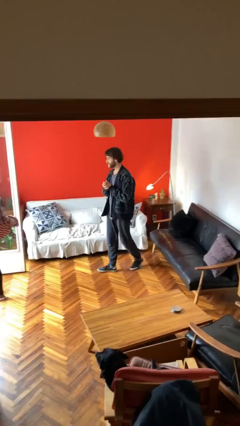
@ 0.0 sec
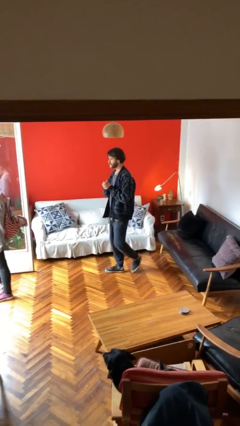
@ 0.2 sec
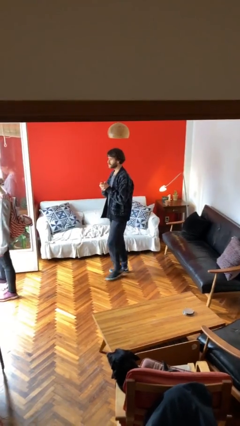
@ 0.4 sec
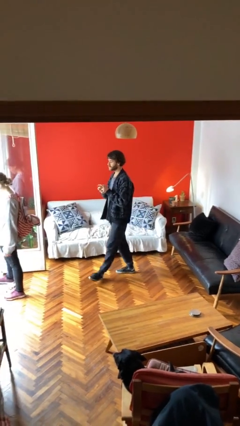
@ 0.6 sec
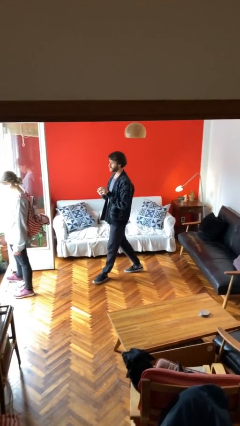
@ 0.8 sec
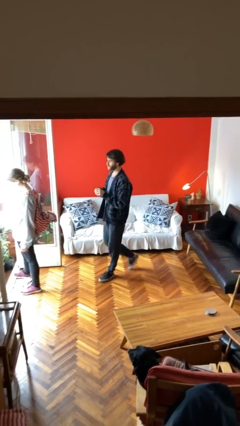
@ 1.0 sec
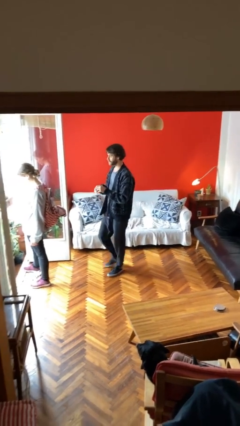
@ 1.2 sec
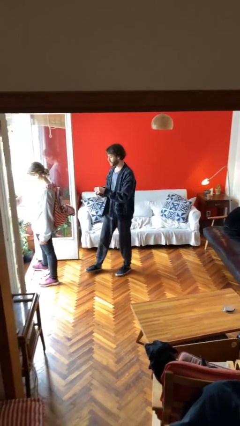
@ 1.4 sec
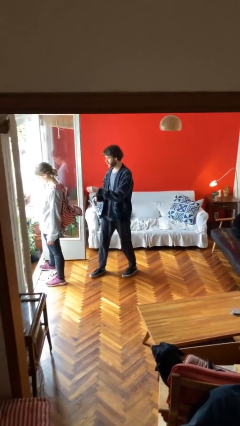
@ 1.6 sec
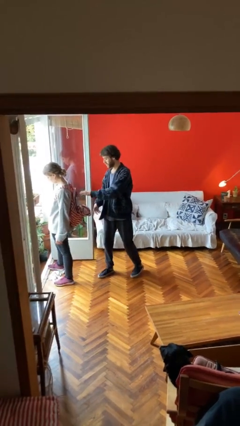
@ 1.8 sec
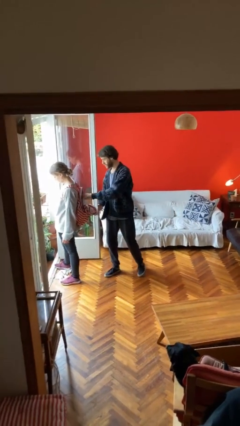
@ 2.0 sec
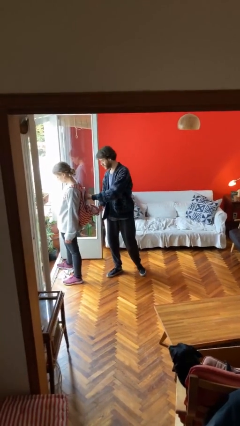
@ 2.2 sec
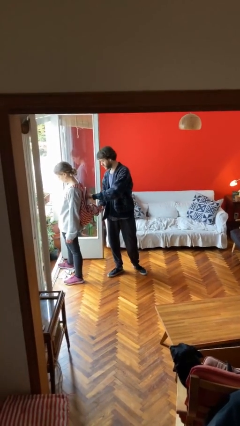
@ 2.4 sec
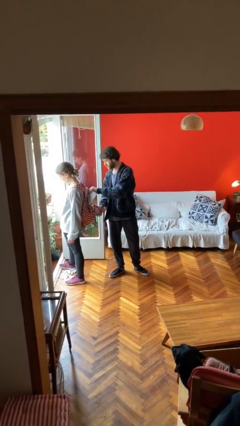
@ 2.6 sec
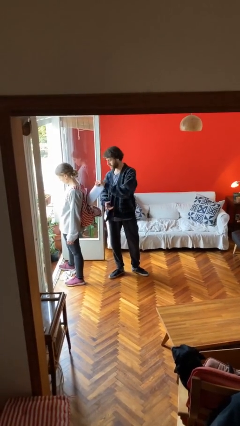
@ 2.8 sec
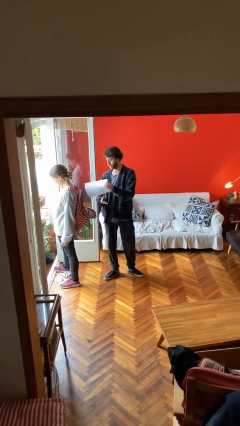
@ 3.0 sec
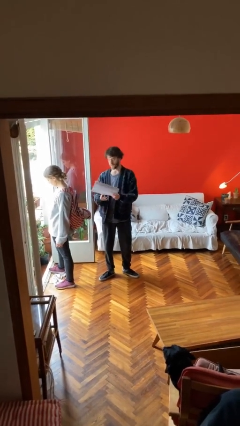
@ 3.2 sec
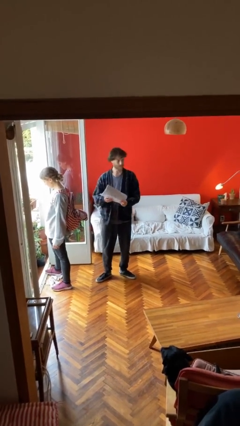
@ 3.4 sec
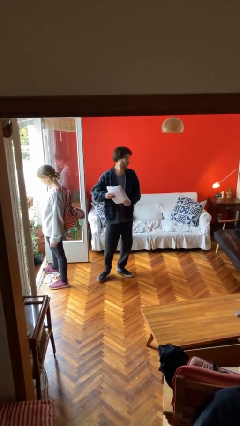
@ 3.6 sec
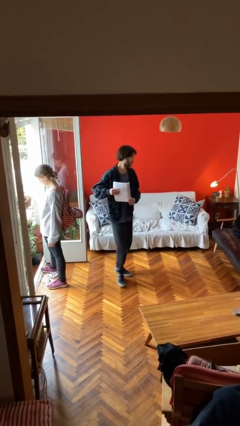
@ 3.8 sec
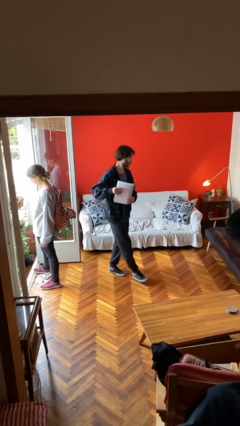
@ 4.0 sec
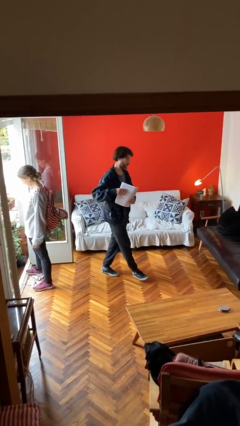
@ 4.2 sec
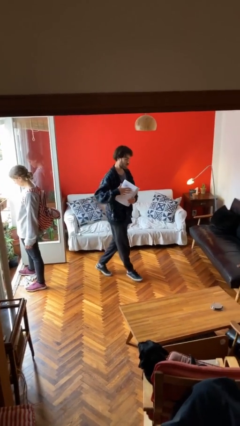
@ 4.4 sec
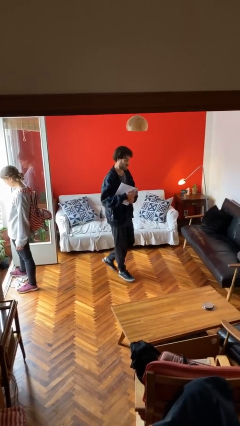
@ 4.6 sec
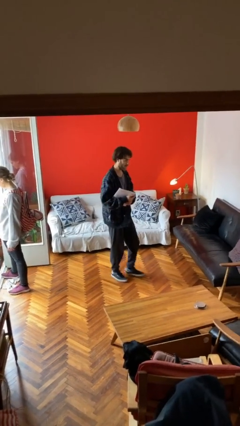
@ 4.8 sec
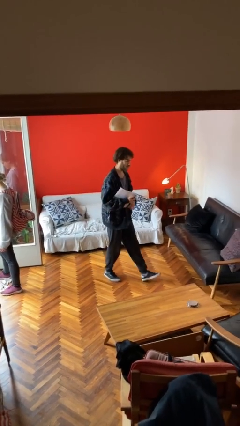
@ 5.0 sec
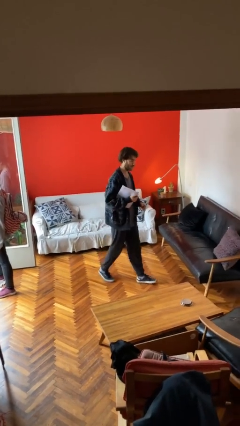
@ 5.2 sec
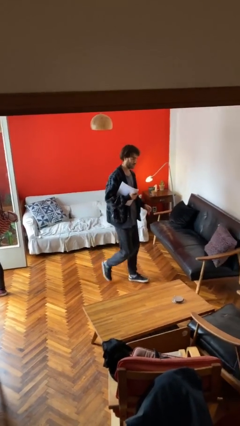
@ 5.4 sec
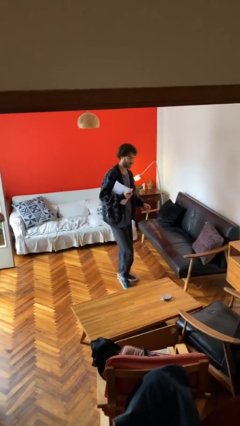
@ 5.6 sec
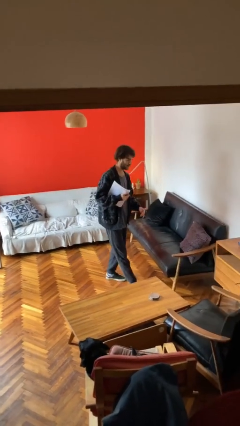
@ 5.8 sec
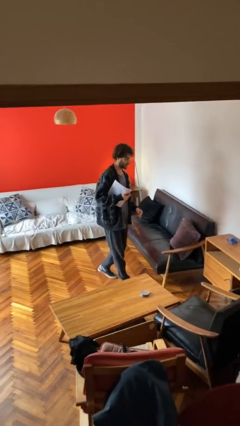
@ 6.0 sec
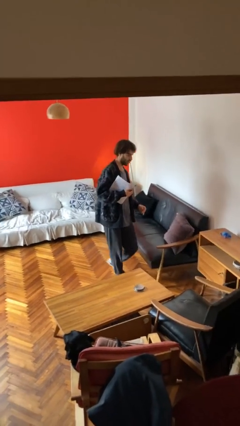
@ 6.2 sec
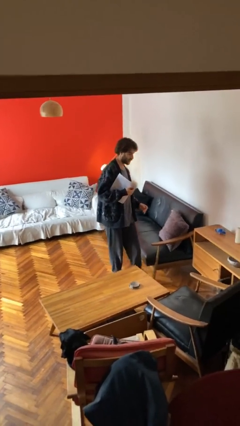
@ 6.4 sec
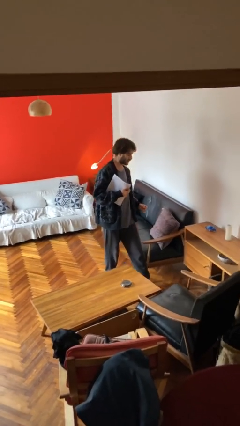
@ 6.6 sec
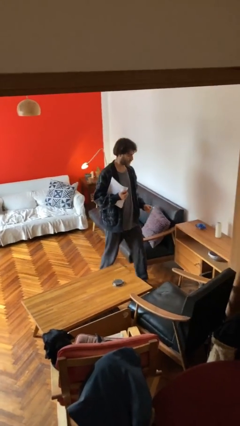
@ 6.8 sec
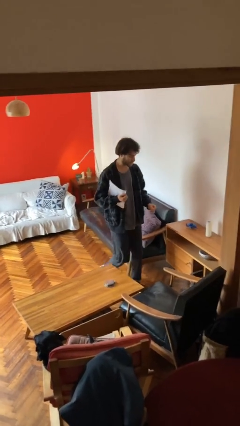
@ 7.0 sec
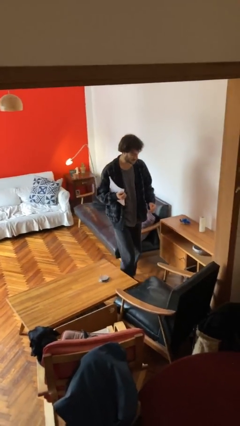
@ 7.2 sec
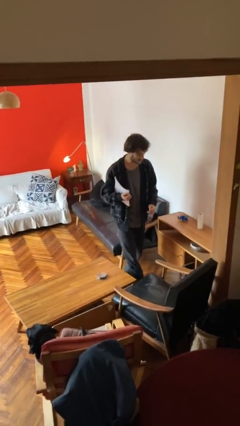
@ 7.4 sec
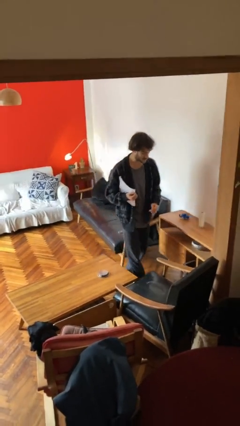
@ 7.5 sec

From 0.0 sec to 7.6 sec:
person steals object from person

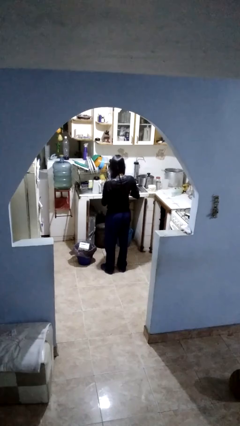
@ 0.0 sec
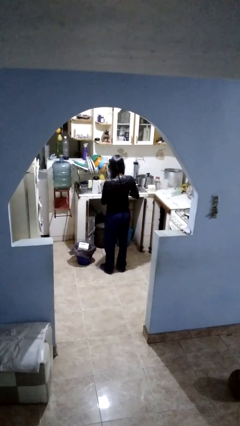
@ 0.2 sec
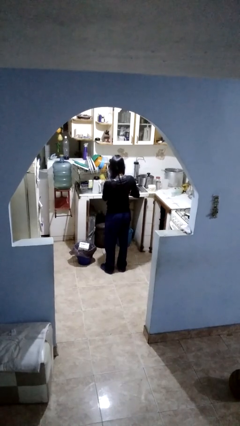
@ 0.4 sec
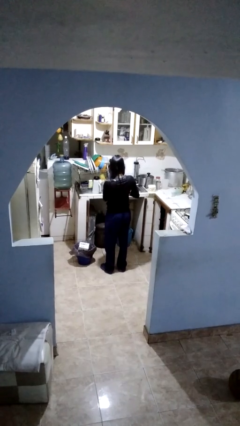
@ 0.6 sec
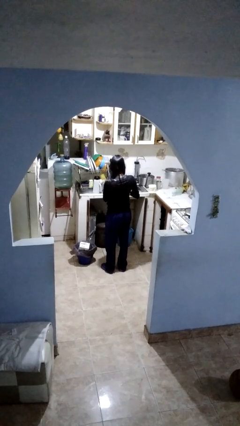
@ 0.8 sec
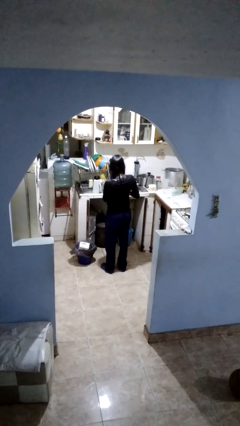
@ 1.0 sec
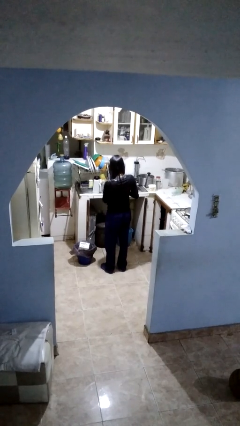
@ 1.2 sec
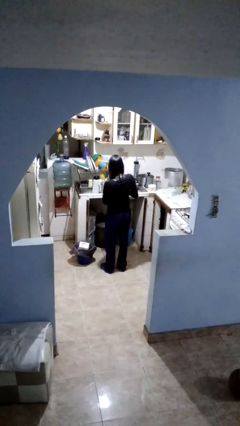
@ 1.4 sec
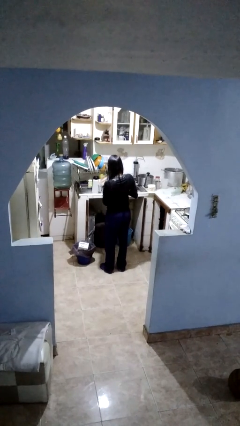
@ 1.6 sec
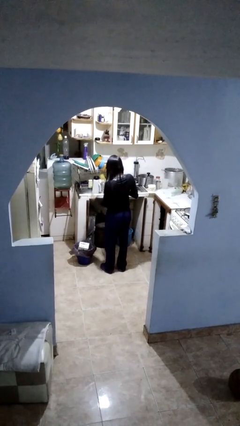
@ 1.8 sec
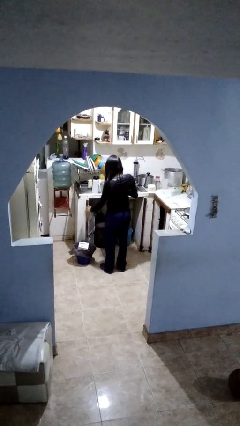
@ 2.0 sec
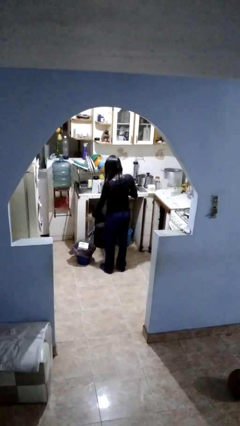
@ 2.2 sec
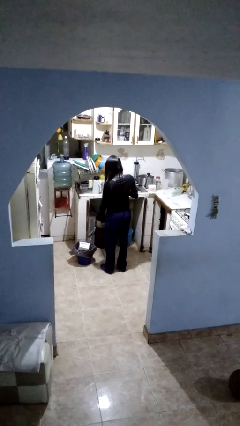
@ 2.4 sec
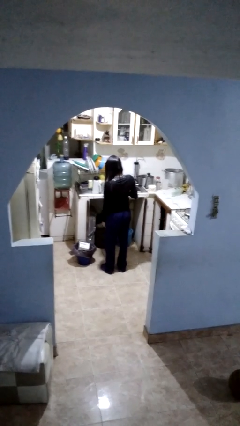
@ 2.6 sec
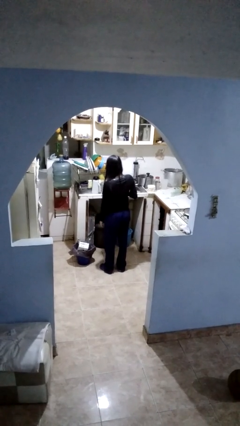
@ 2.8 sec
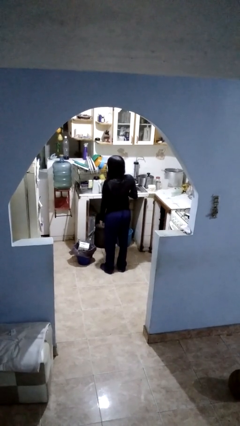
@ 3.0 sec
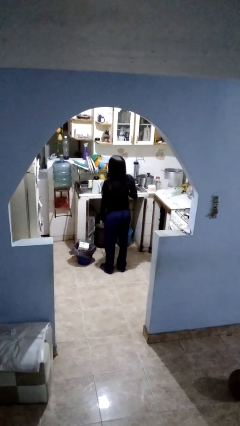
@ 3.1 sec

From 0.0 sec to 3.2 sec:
person discards trash

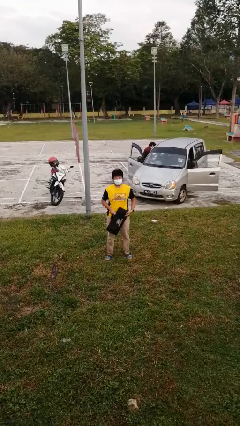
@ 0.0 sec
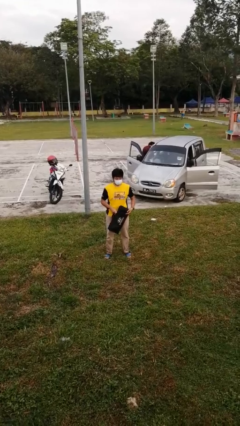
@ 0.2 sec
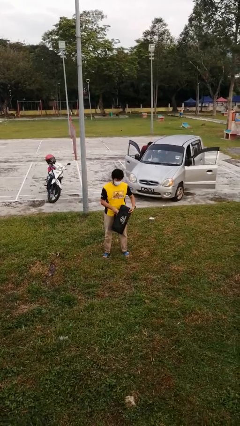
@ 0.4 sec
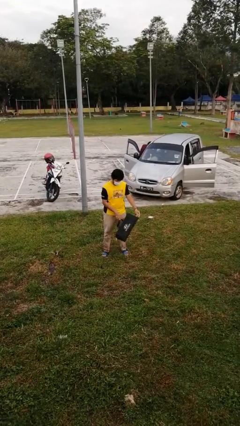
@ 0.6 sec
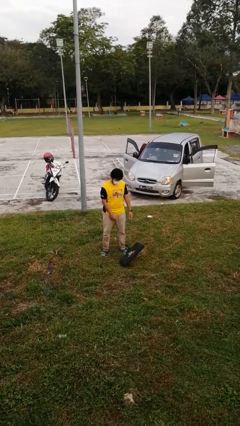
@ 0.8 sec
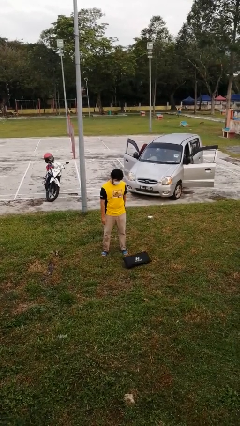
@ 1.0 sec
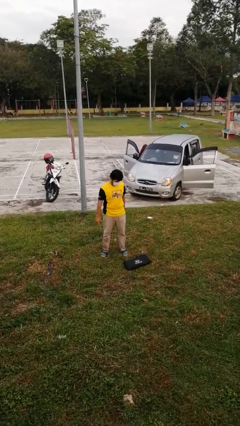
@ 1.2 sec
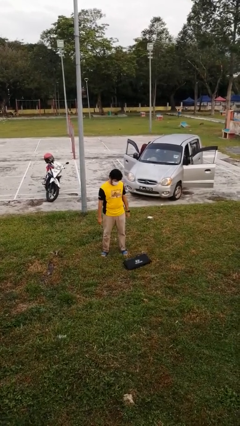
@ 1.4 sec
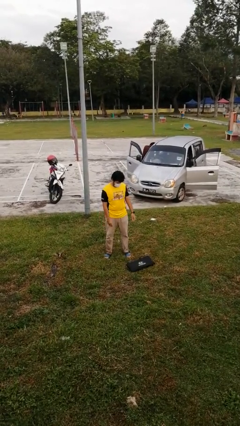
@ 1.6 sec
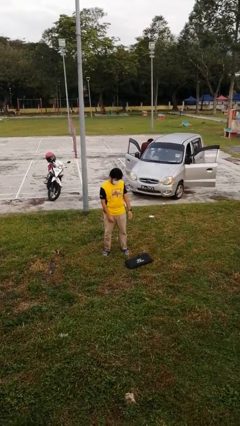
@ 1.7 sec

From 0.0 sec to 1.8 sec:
person drops object

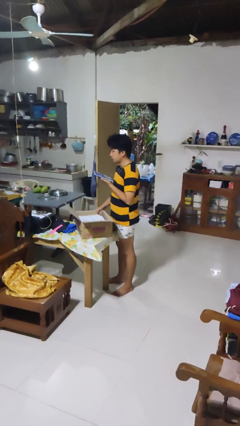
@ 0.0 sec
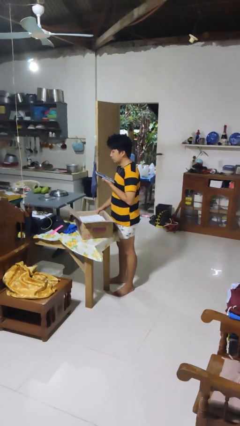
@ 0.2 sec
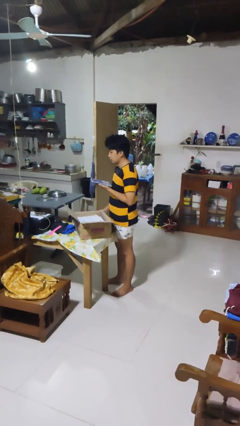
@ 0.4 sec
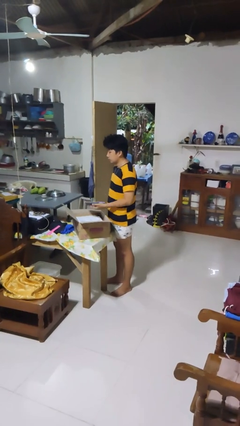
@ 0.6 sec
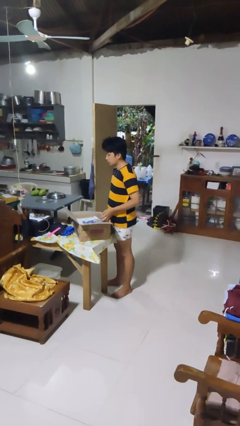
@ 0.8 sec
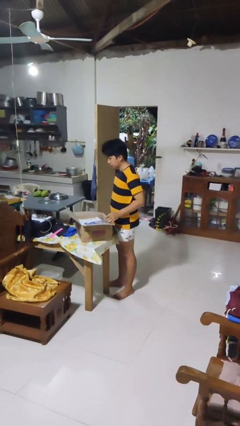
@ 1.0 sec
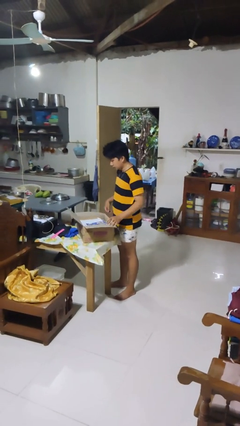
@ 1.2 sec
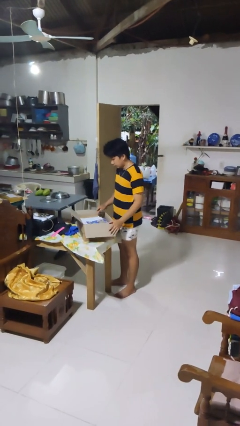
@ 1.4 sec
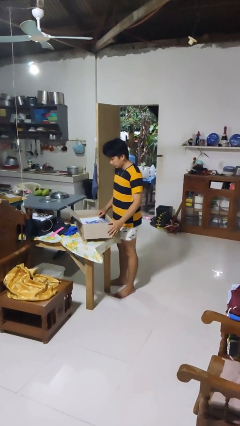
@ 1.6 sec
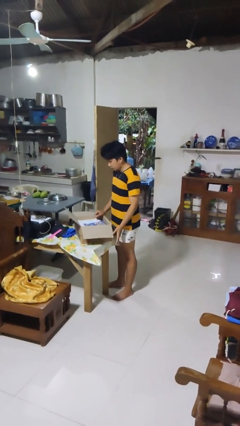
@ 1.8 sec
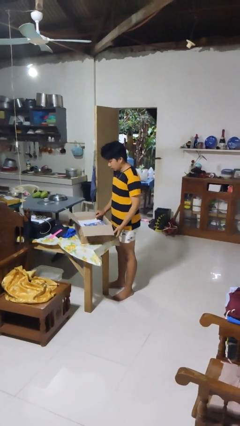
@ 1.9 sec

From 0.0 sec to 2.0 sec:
person puts object into box

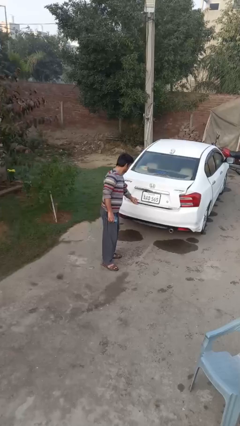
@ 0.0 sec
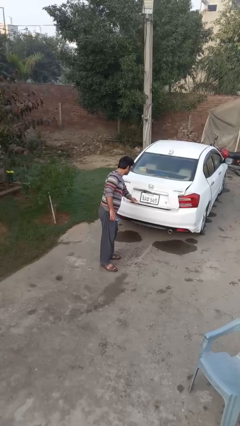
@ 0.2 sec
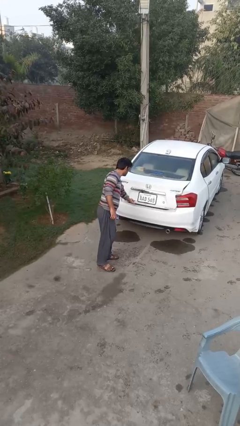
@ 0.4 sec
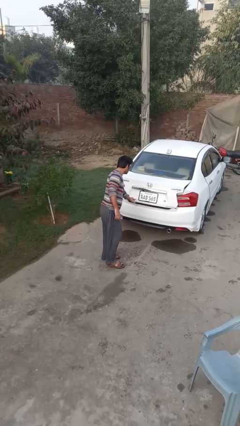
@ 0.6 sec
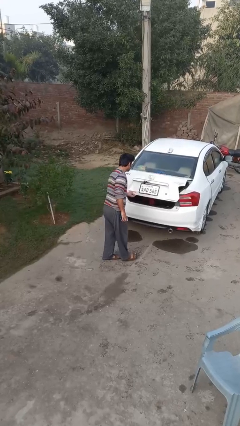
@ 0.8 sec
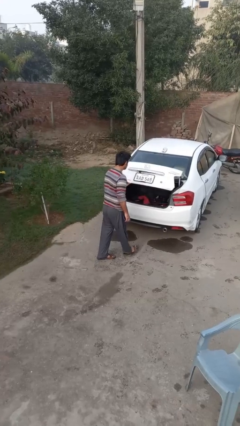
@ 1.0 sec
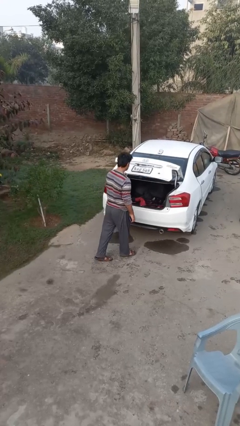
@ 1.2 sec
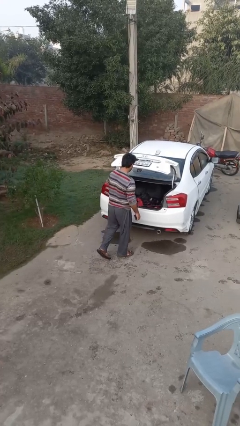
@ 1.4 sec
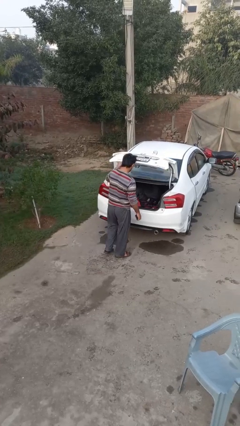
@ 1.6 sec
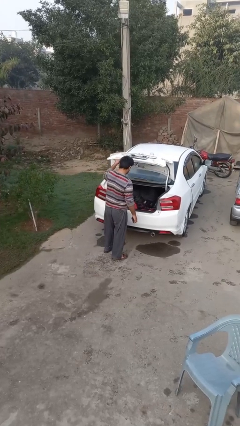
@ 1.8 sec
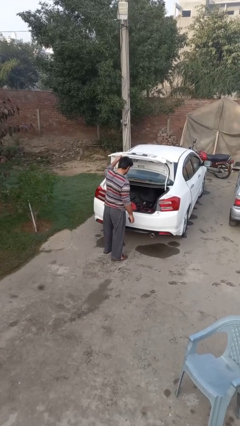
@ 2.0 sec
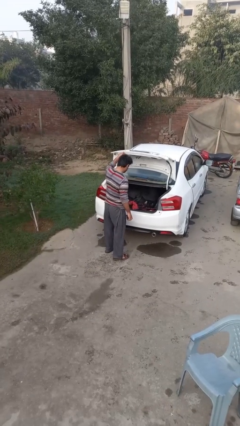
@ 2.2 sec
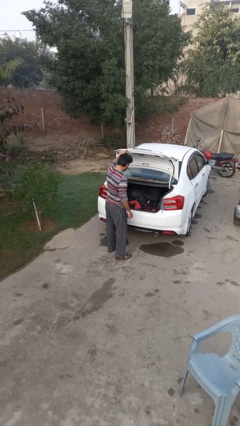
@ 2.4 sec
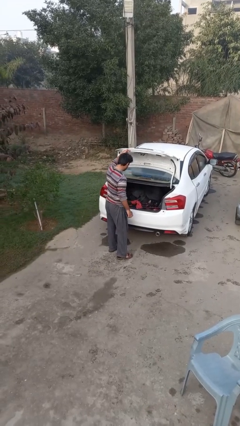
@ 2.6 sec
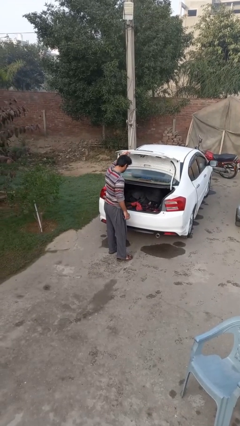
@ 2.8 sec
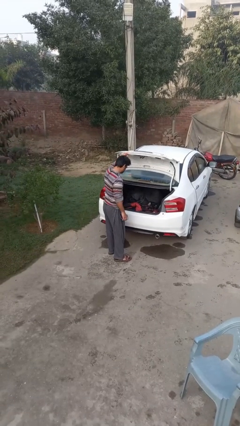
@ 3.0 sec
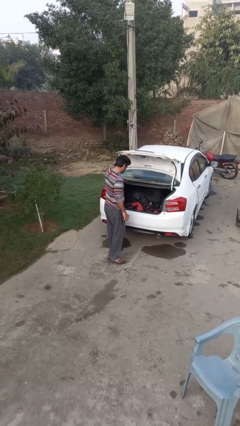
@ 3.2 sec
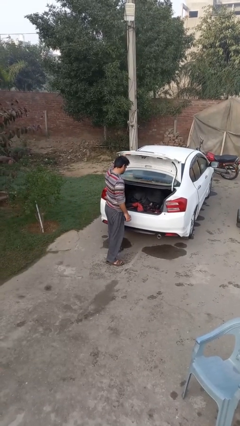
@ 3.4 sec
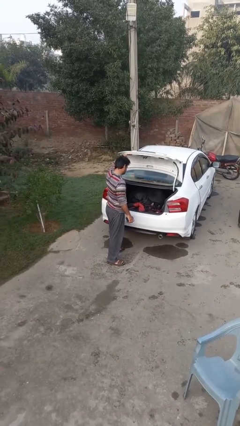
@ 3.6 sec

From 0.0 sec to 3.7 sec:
person opens car trunk
